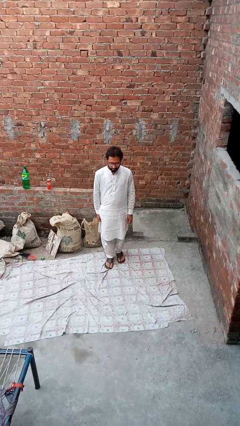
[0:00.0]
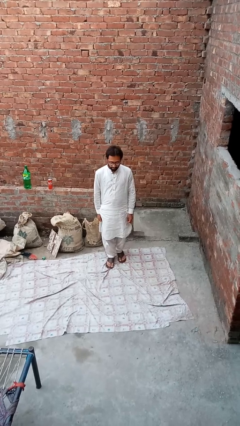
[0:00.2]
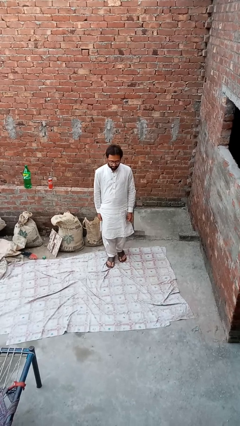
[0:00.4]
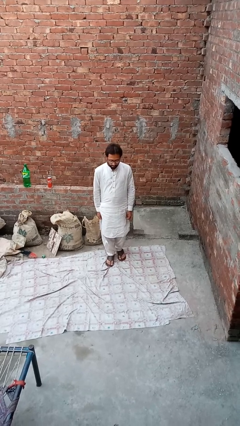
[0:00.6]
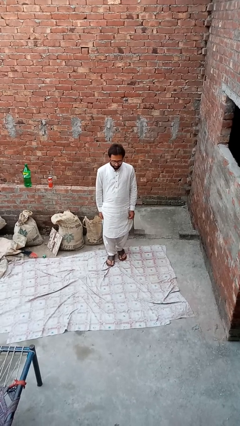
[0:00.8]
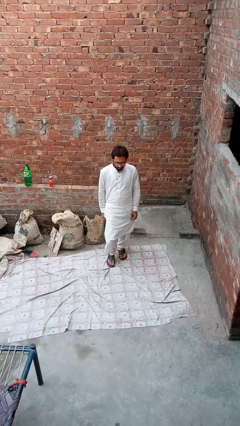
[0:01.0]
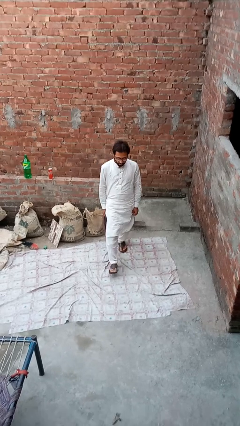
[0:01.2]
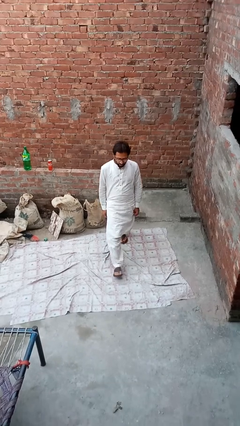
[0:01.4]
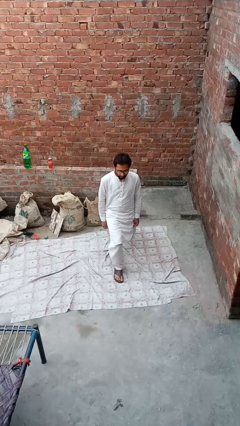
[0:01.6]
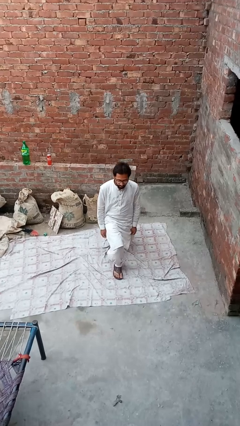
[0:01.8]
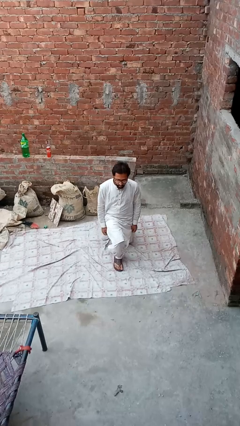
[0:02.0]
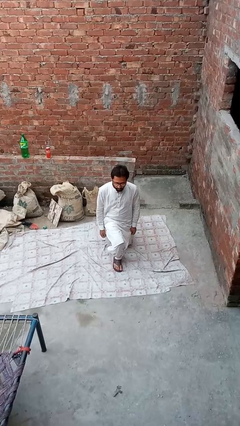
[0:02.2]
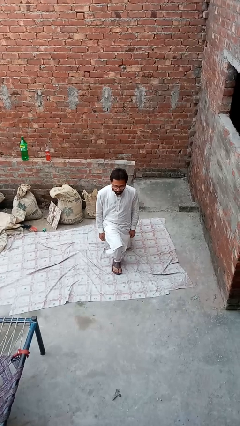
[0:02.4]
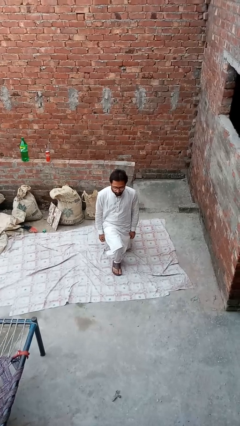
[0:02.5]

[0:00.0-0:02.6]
person exercises with lunges

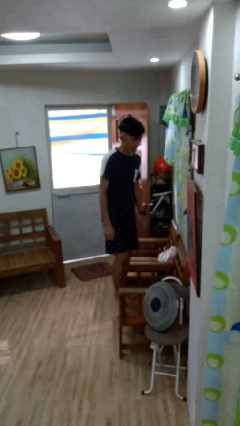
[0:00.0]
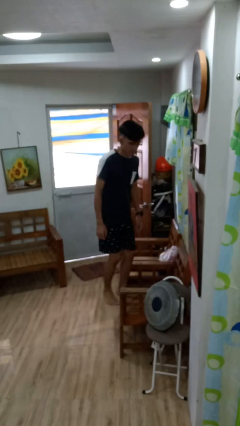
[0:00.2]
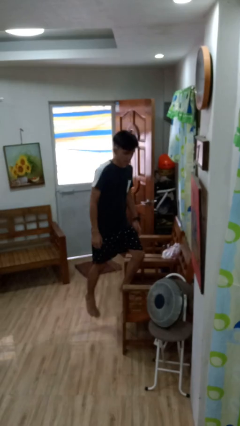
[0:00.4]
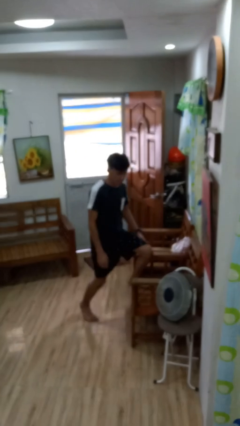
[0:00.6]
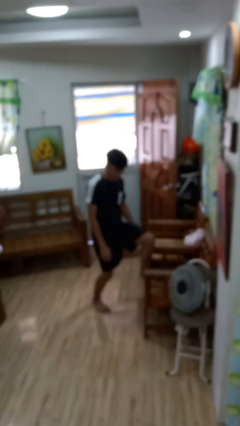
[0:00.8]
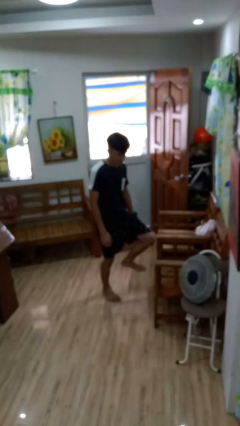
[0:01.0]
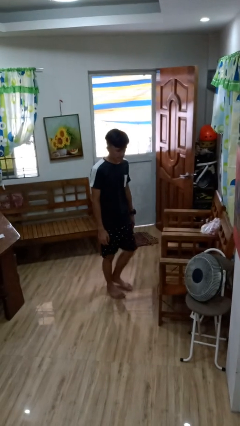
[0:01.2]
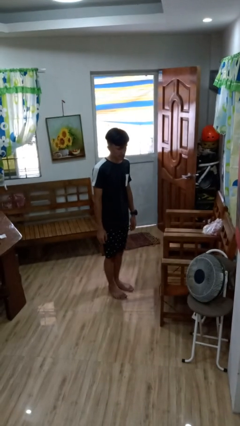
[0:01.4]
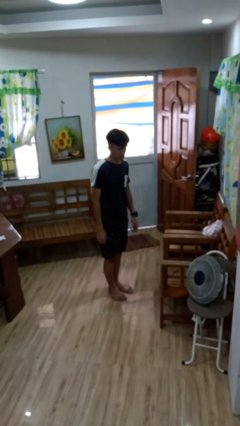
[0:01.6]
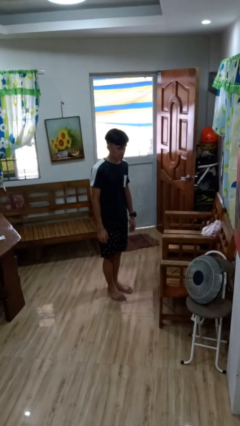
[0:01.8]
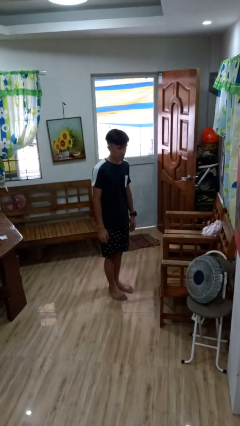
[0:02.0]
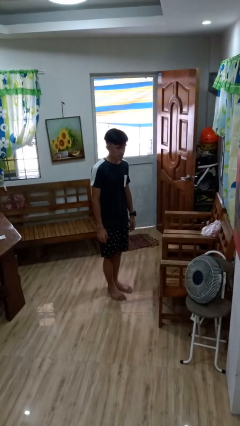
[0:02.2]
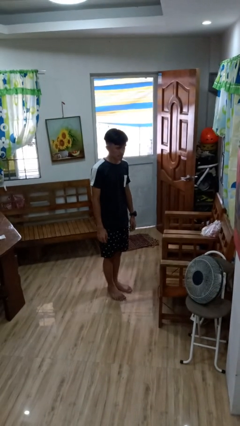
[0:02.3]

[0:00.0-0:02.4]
person climbs off chair

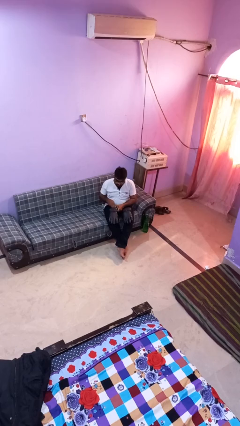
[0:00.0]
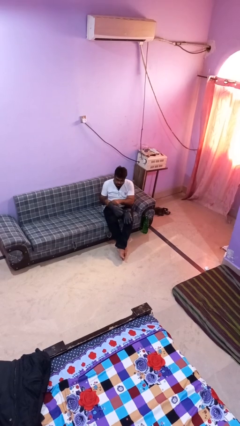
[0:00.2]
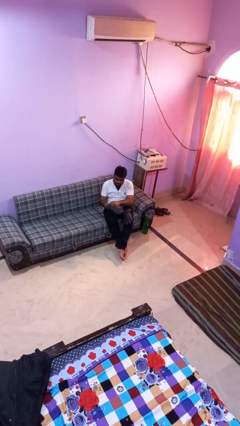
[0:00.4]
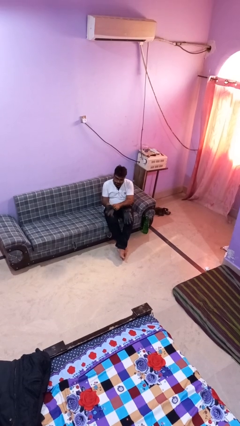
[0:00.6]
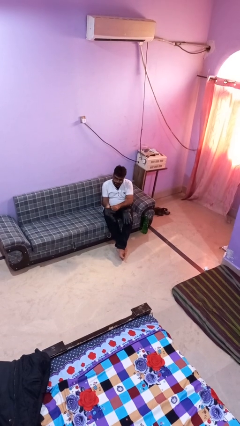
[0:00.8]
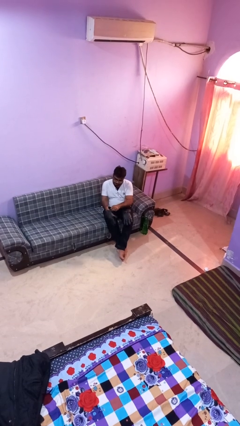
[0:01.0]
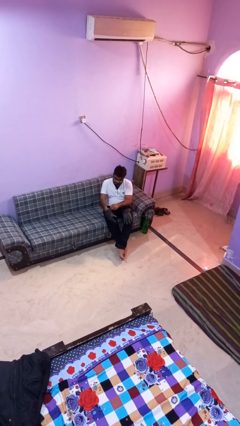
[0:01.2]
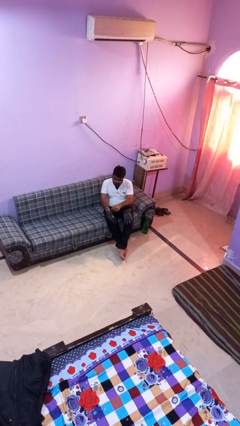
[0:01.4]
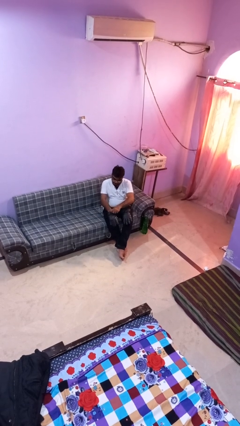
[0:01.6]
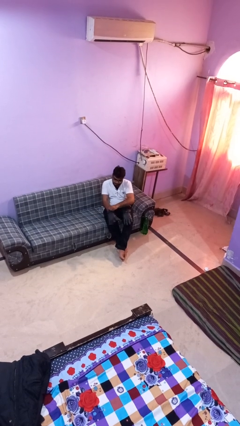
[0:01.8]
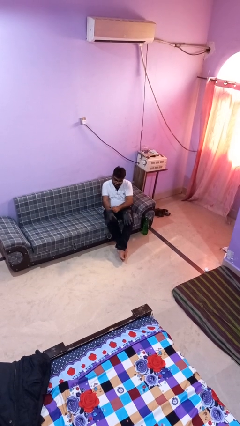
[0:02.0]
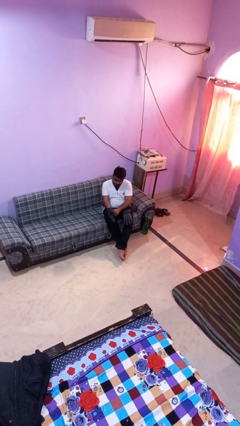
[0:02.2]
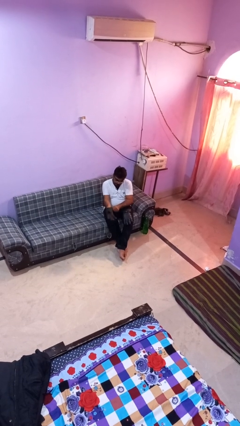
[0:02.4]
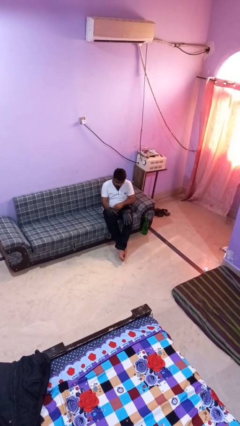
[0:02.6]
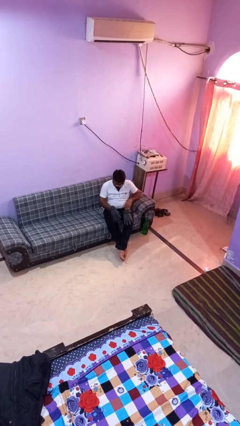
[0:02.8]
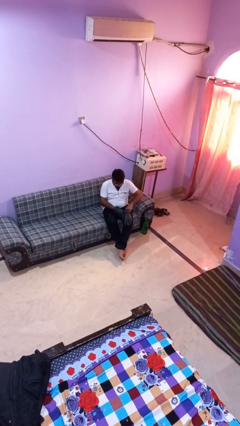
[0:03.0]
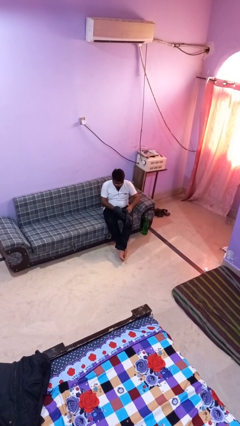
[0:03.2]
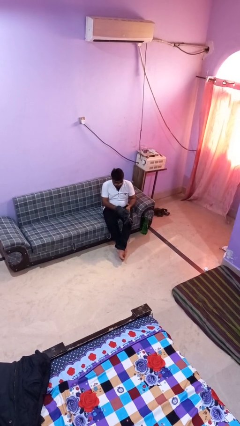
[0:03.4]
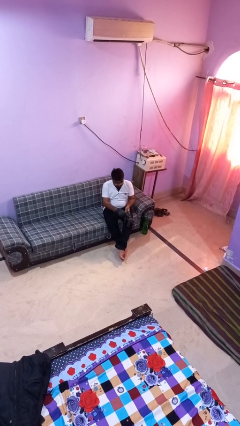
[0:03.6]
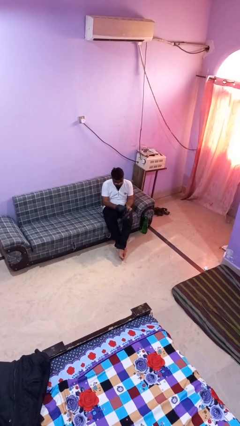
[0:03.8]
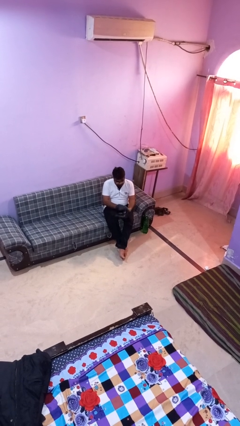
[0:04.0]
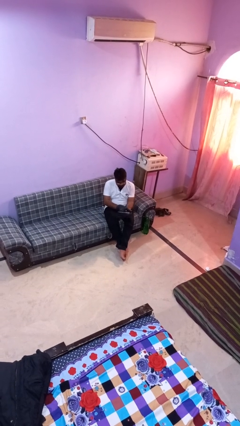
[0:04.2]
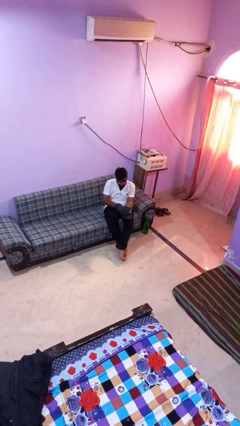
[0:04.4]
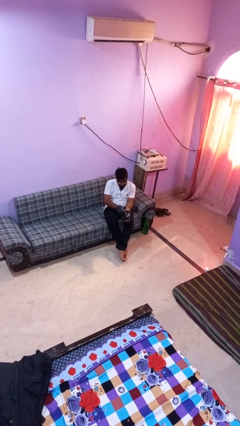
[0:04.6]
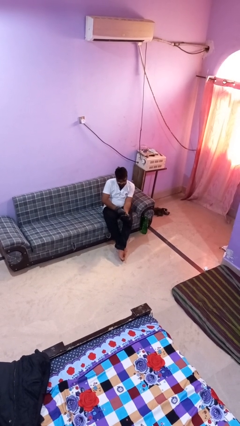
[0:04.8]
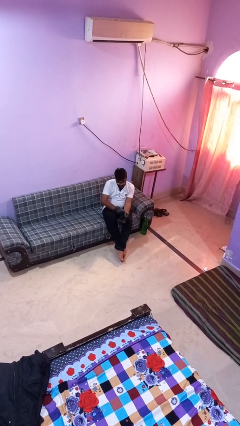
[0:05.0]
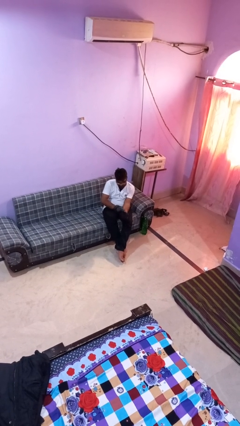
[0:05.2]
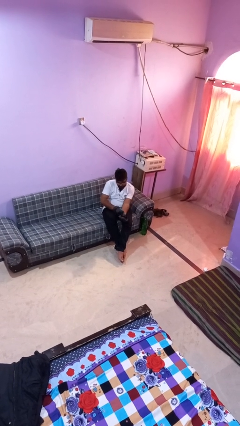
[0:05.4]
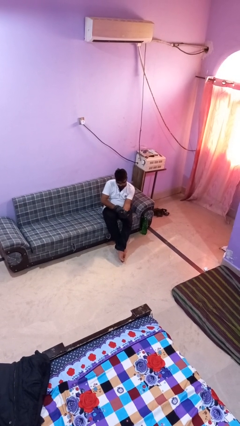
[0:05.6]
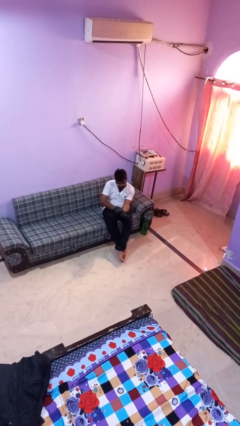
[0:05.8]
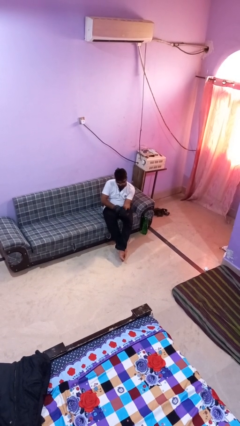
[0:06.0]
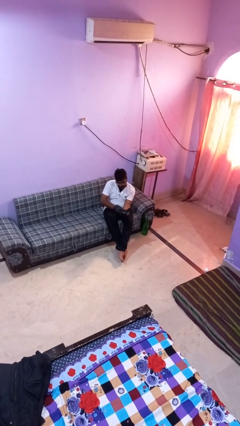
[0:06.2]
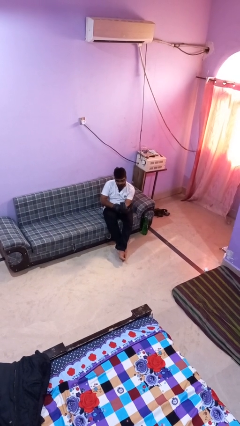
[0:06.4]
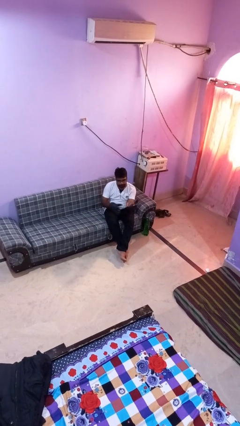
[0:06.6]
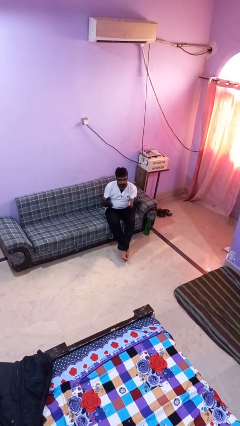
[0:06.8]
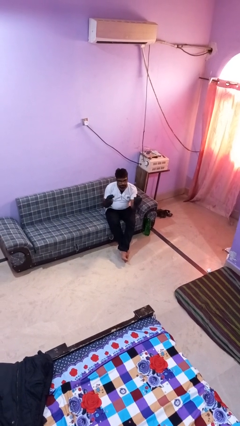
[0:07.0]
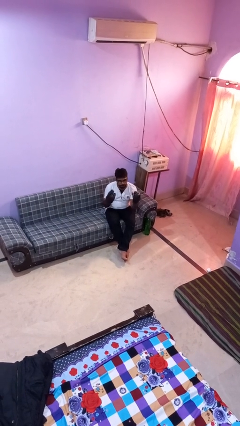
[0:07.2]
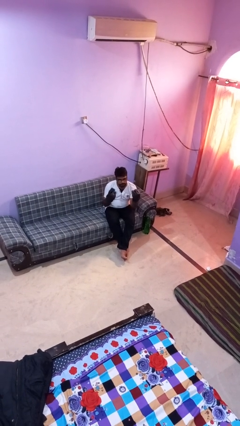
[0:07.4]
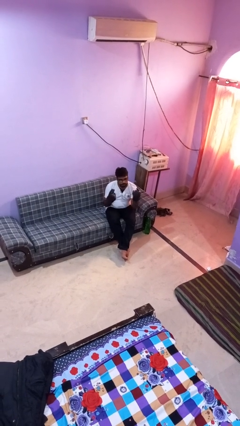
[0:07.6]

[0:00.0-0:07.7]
person puts on gloves

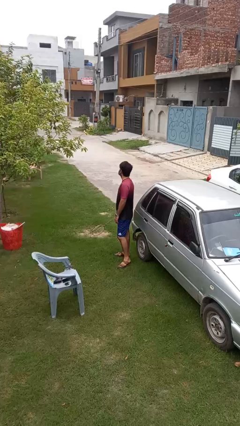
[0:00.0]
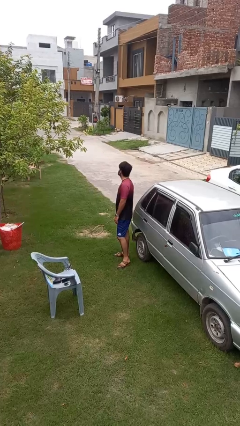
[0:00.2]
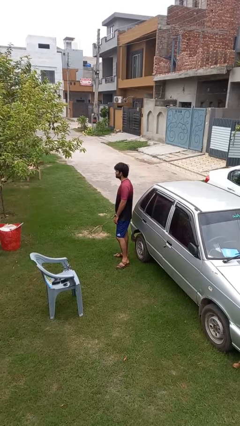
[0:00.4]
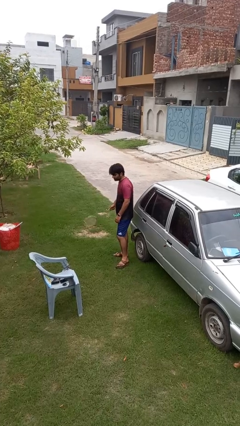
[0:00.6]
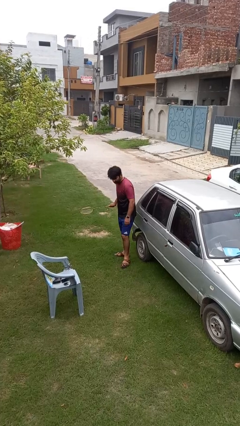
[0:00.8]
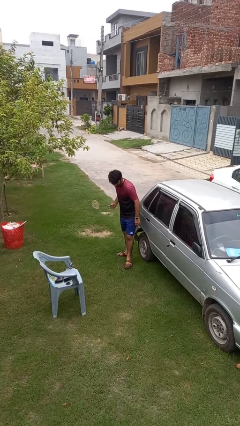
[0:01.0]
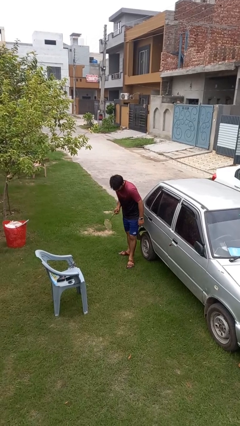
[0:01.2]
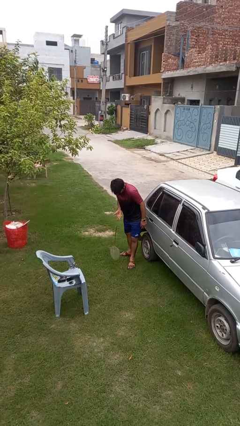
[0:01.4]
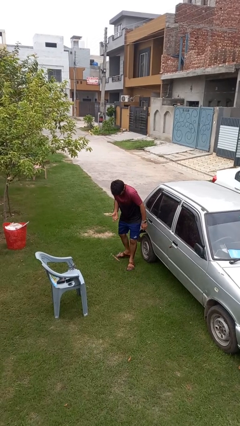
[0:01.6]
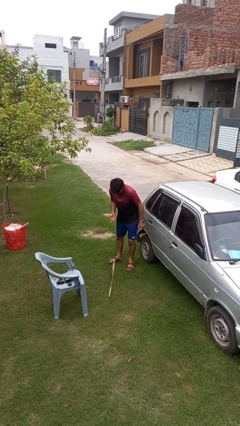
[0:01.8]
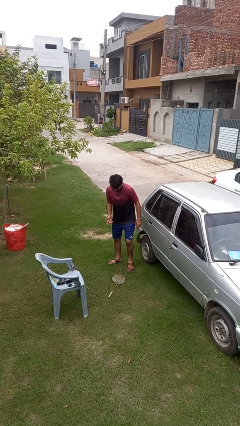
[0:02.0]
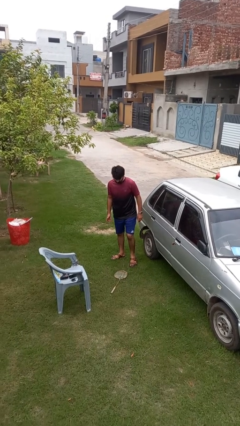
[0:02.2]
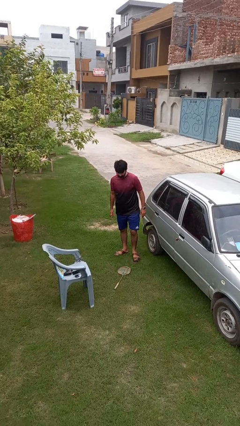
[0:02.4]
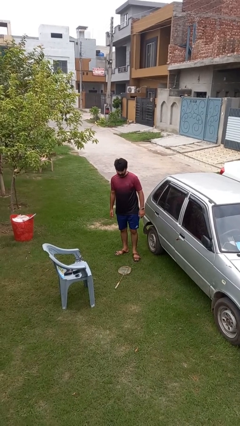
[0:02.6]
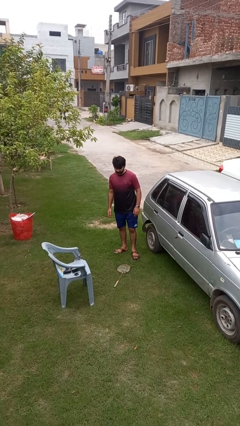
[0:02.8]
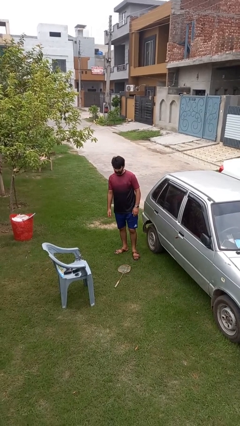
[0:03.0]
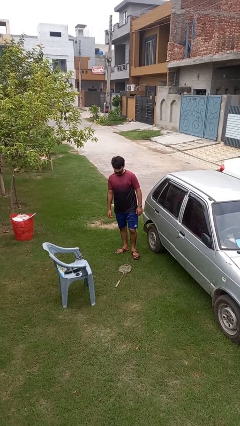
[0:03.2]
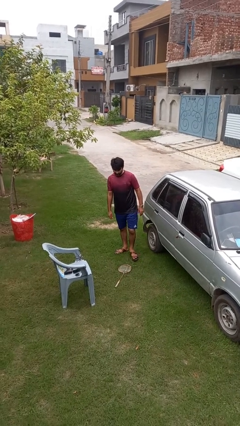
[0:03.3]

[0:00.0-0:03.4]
person drops object

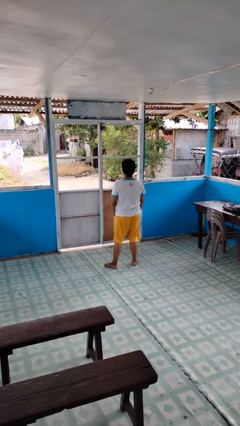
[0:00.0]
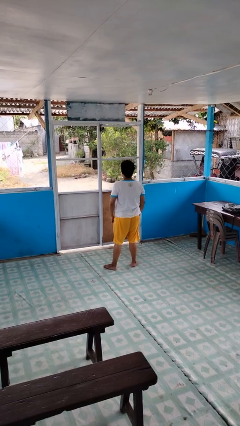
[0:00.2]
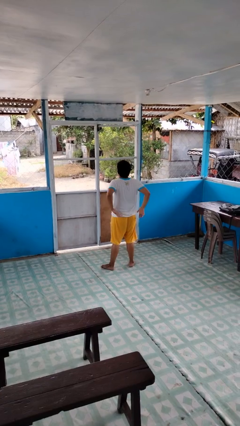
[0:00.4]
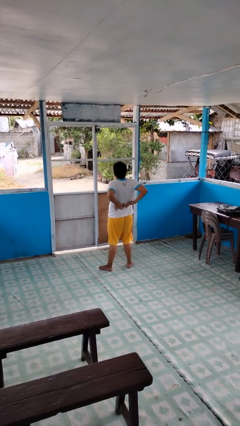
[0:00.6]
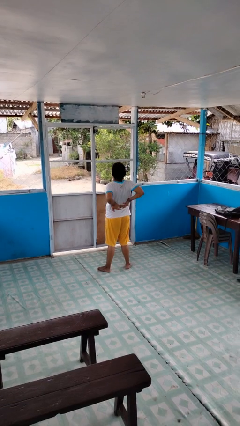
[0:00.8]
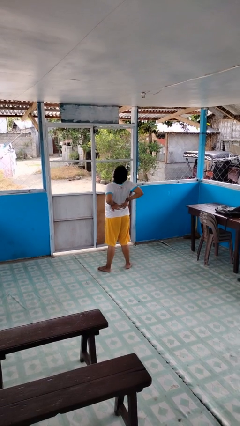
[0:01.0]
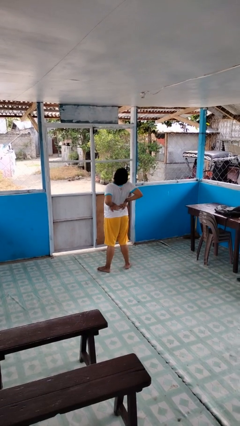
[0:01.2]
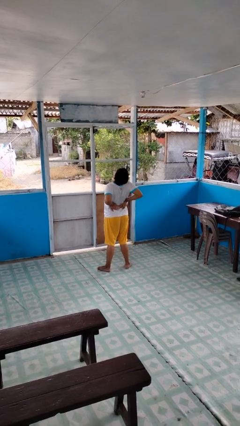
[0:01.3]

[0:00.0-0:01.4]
person stretches back

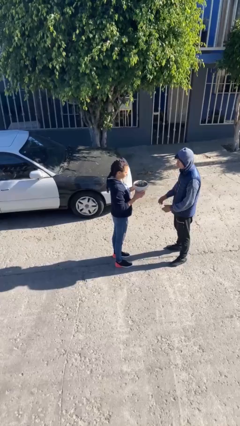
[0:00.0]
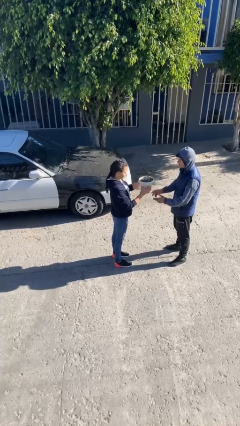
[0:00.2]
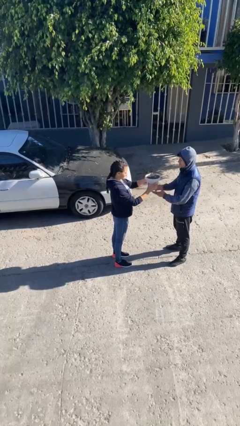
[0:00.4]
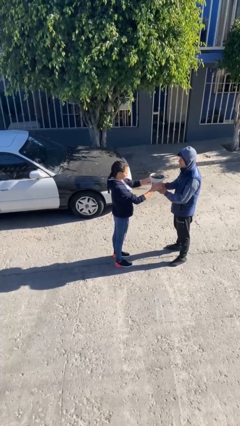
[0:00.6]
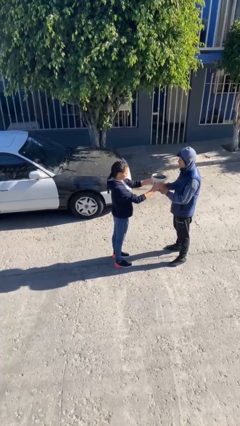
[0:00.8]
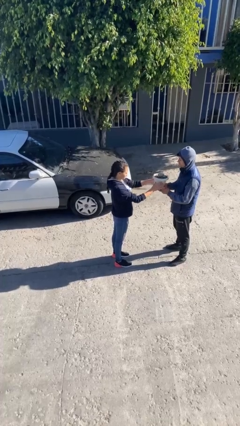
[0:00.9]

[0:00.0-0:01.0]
person transfers object to person
